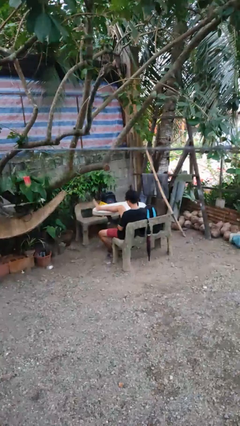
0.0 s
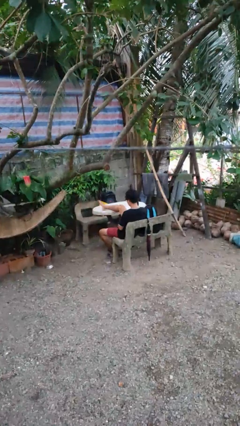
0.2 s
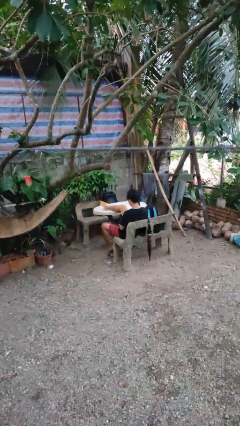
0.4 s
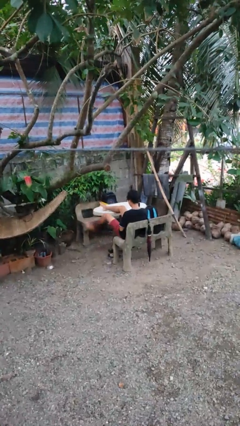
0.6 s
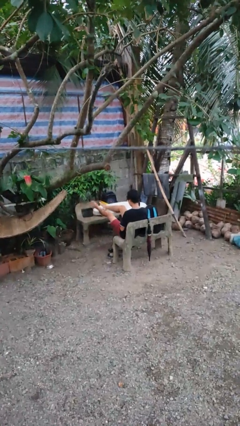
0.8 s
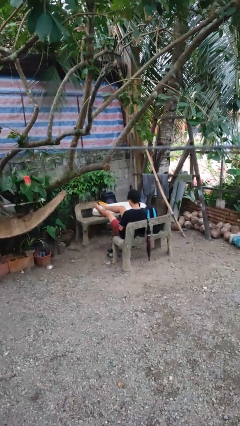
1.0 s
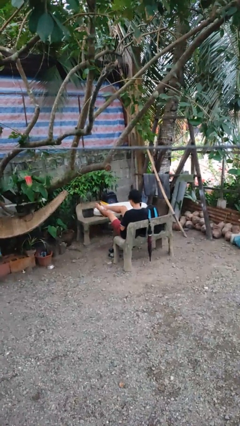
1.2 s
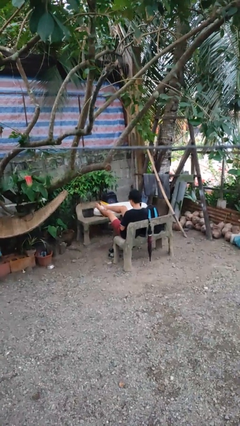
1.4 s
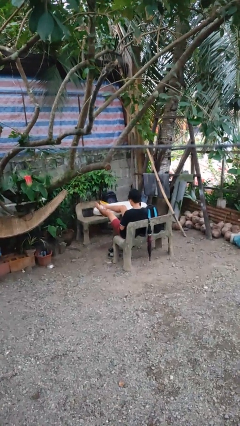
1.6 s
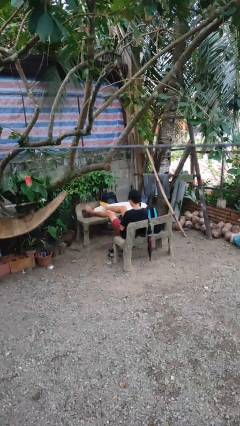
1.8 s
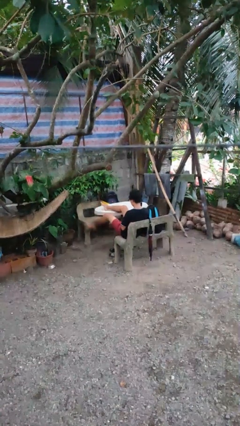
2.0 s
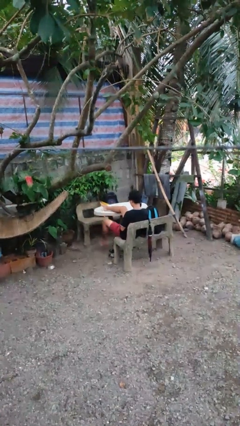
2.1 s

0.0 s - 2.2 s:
person puts feet up

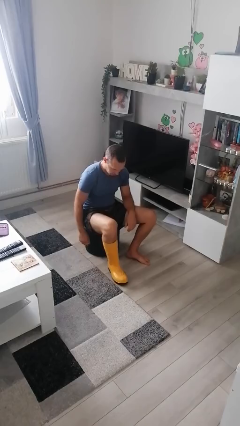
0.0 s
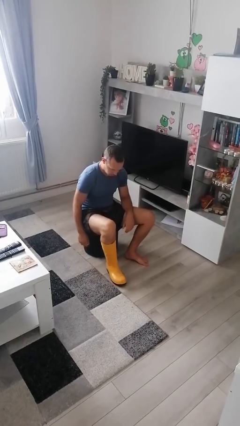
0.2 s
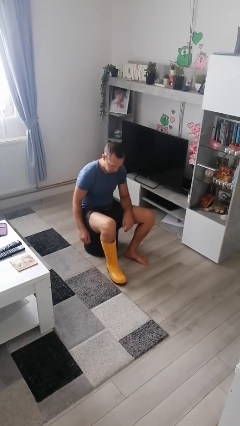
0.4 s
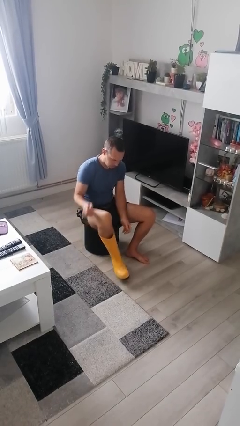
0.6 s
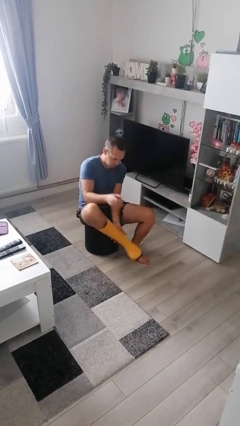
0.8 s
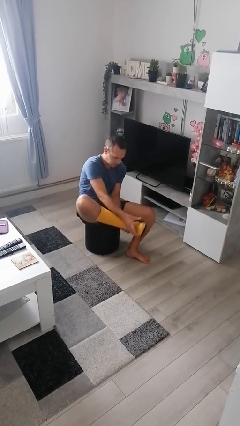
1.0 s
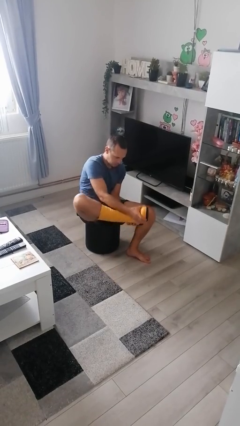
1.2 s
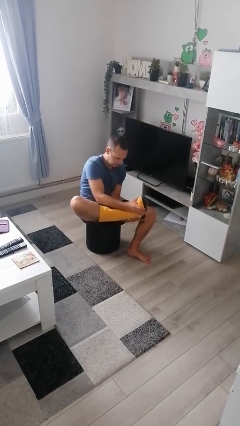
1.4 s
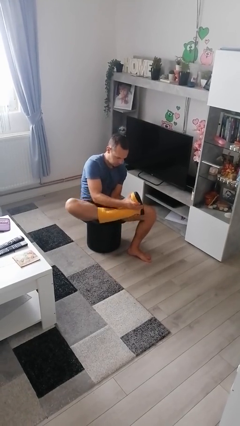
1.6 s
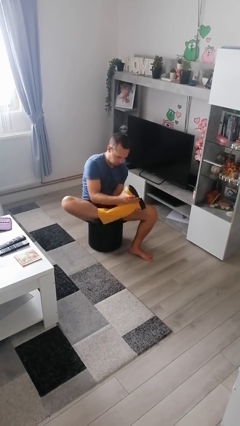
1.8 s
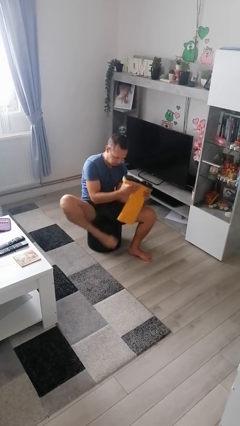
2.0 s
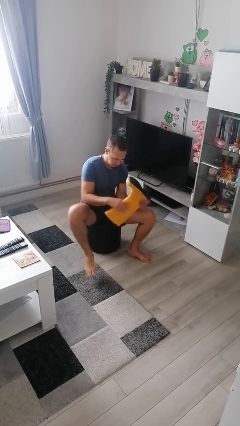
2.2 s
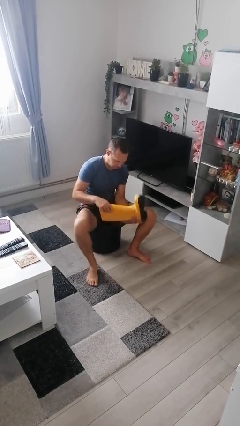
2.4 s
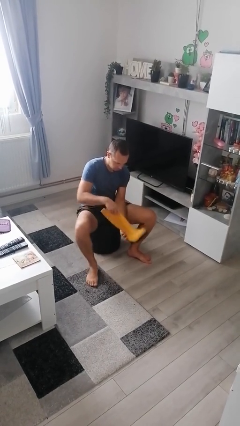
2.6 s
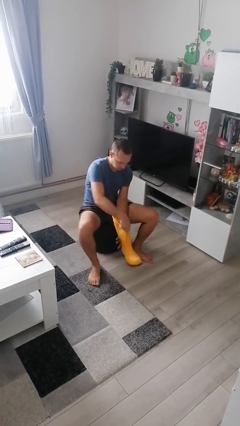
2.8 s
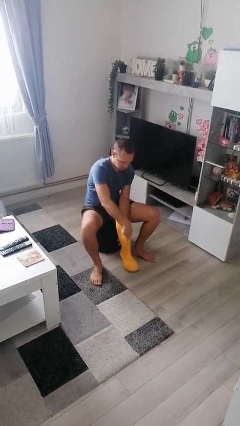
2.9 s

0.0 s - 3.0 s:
person takes off boots

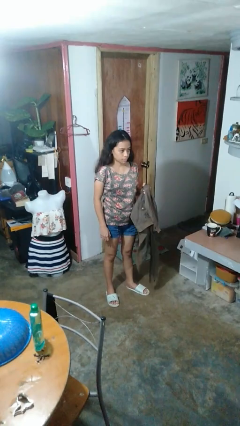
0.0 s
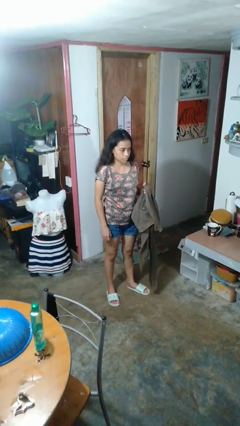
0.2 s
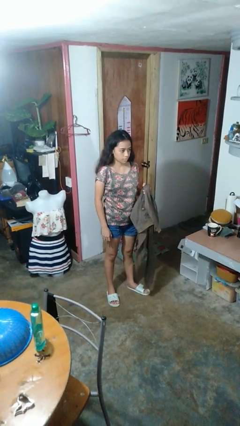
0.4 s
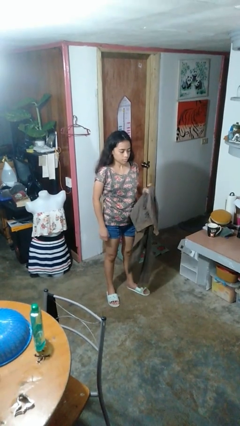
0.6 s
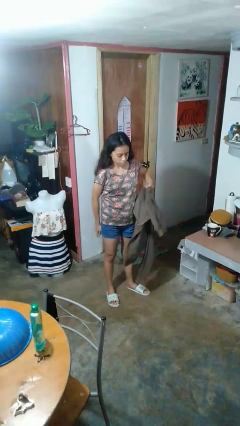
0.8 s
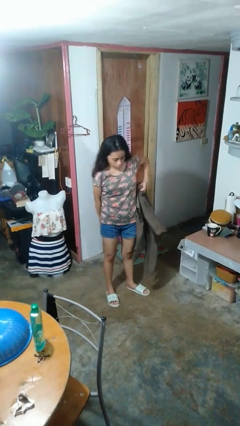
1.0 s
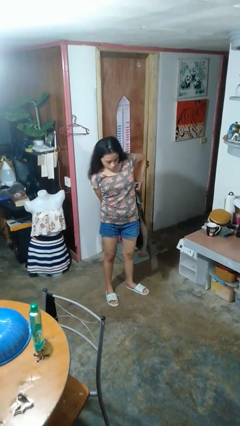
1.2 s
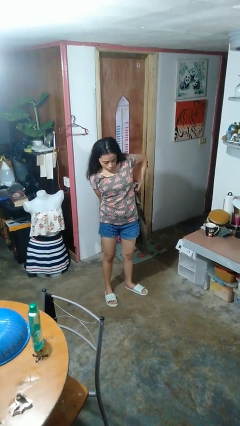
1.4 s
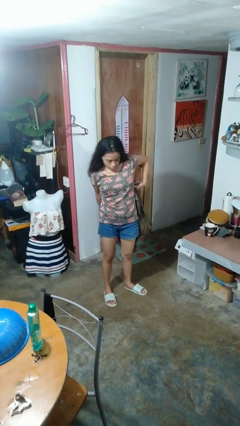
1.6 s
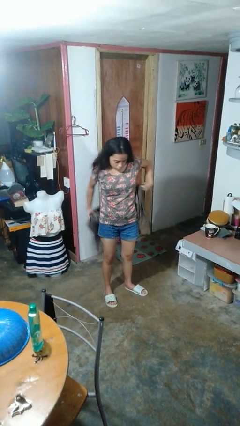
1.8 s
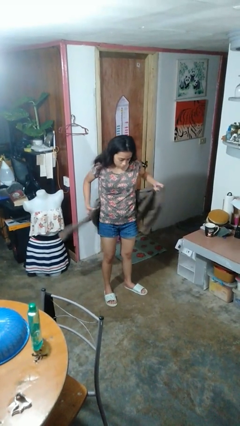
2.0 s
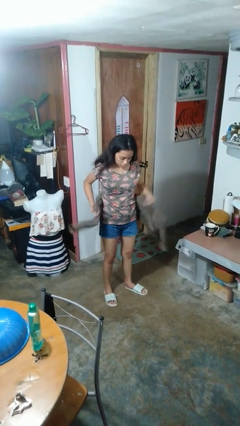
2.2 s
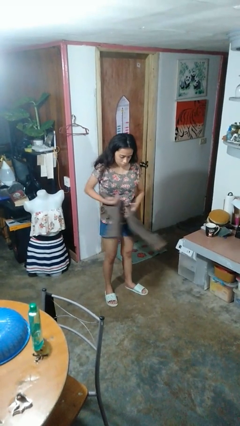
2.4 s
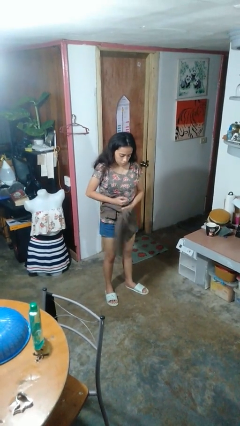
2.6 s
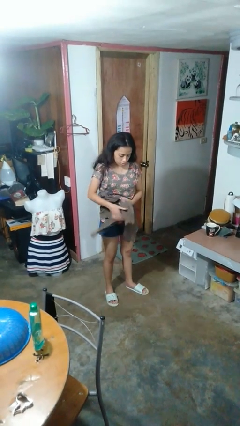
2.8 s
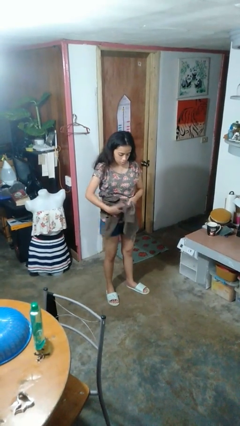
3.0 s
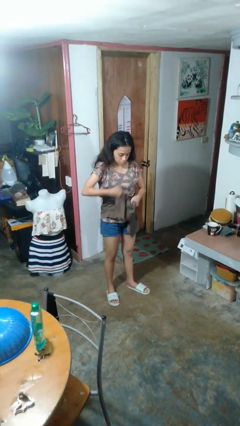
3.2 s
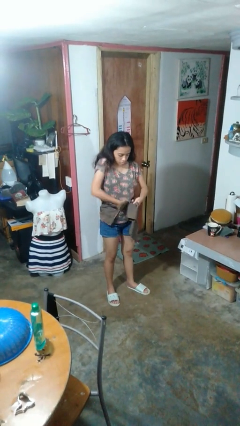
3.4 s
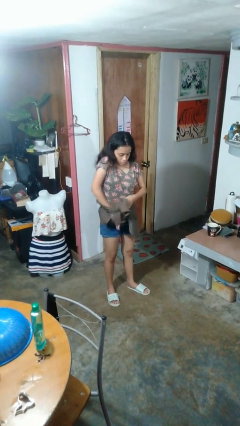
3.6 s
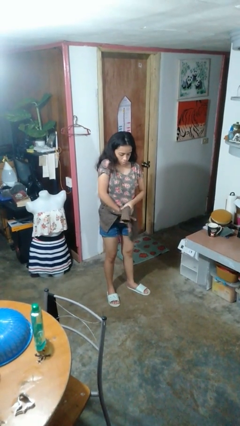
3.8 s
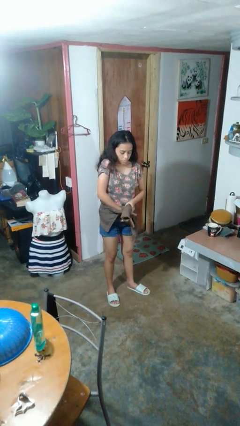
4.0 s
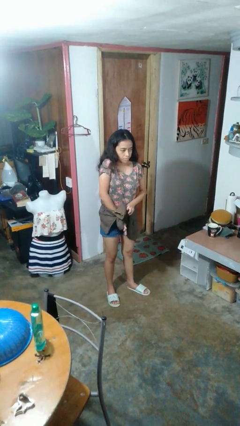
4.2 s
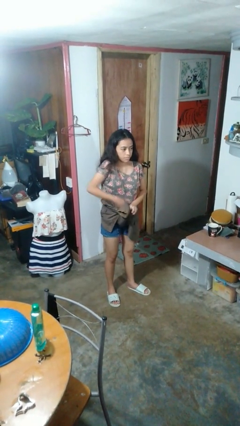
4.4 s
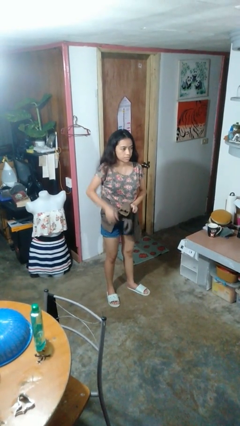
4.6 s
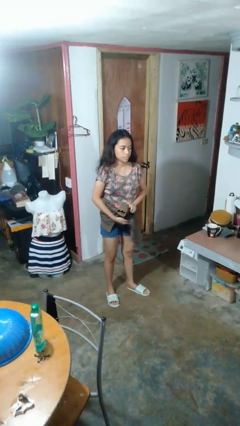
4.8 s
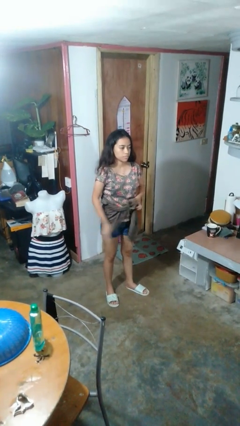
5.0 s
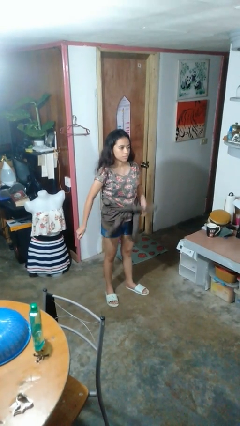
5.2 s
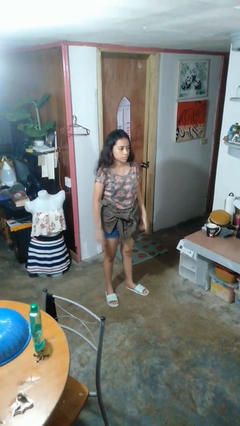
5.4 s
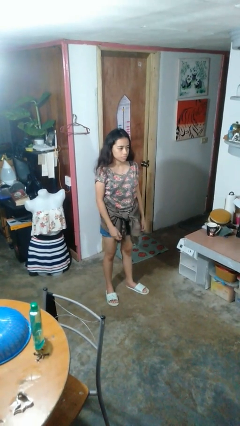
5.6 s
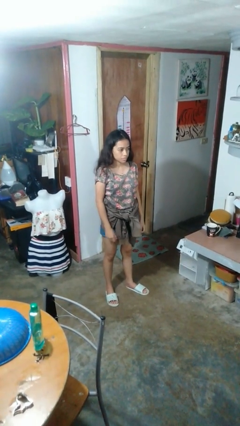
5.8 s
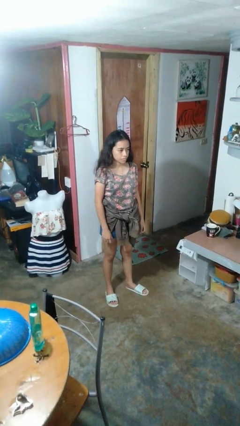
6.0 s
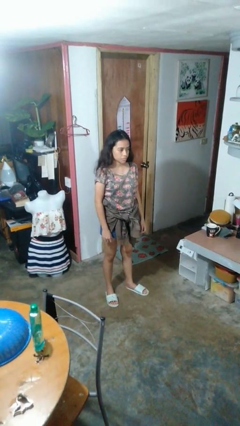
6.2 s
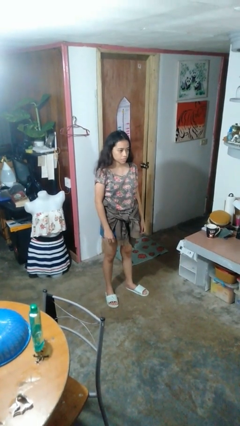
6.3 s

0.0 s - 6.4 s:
person ties jacket around waist

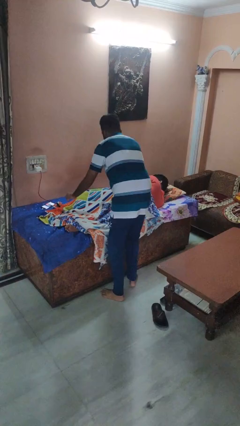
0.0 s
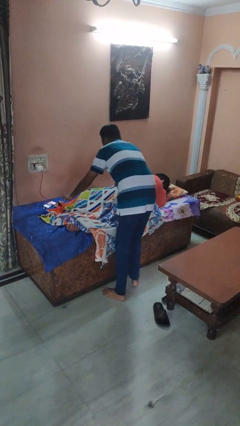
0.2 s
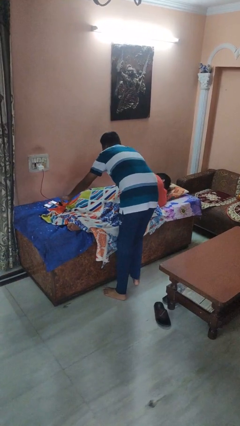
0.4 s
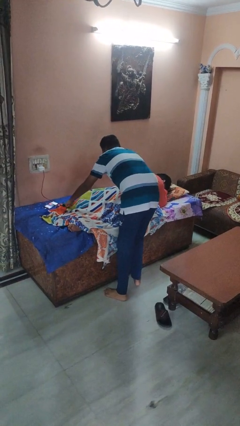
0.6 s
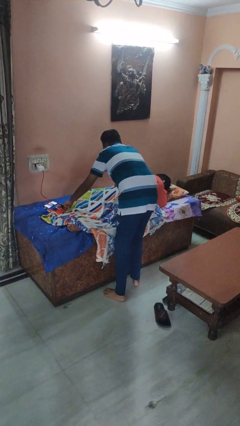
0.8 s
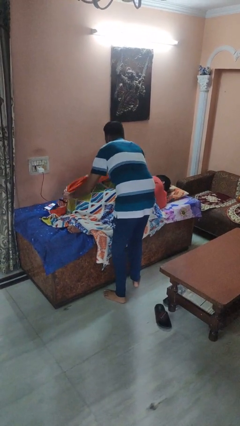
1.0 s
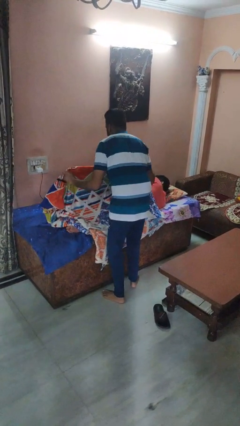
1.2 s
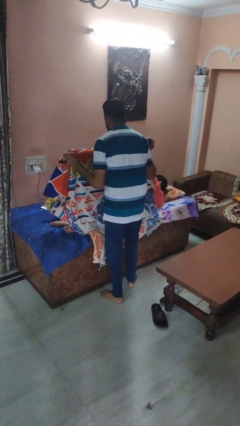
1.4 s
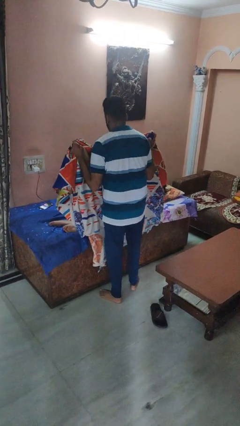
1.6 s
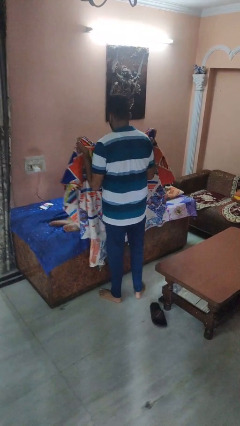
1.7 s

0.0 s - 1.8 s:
person uncovers friend with blanket

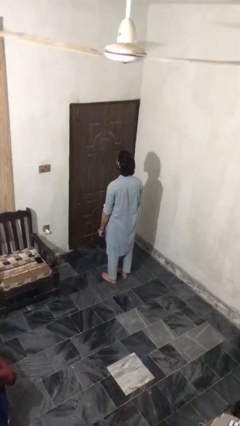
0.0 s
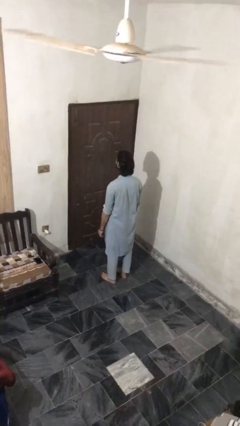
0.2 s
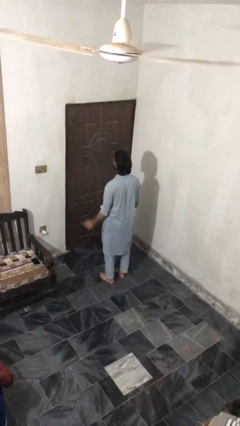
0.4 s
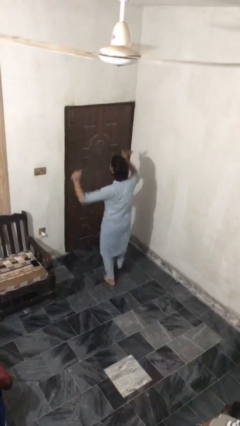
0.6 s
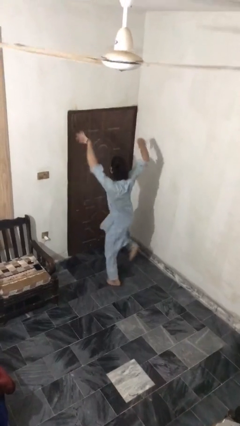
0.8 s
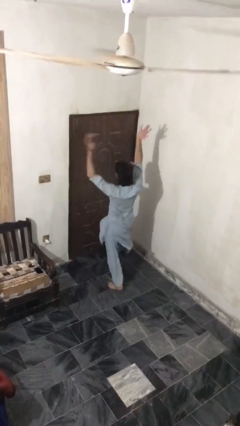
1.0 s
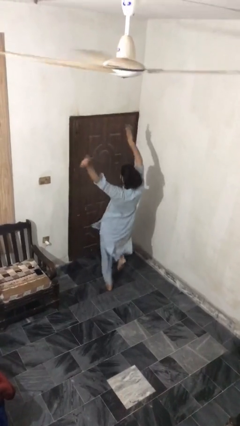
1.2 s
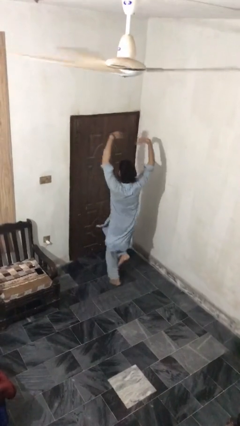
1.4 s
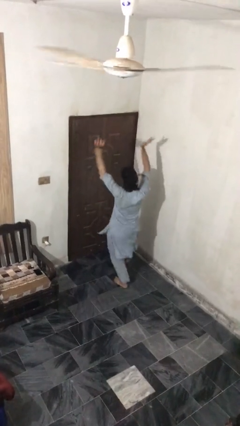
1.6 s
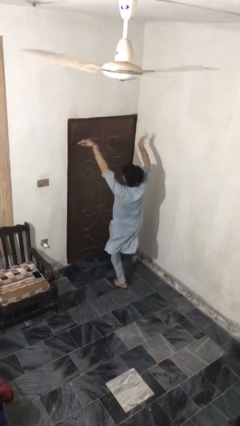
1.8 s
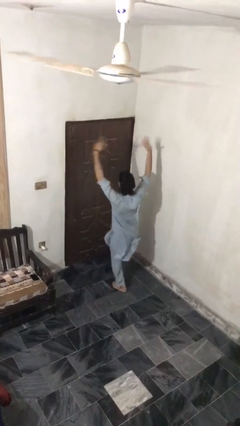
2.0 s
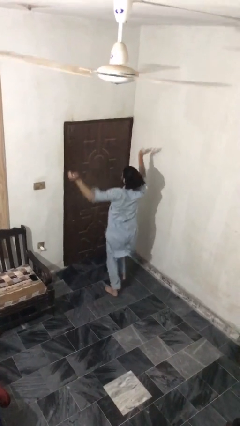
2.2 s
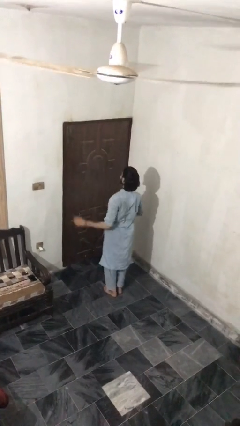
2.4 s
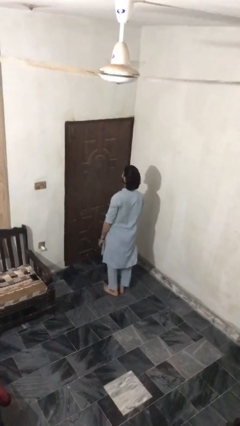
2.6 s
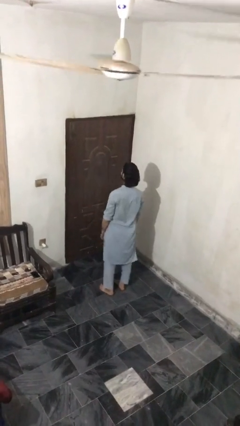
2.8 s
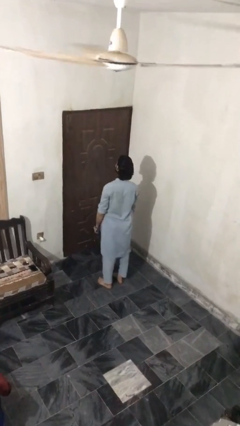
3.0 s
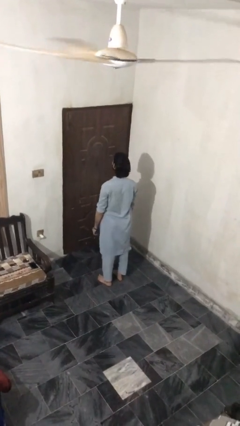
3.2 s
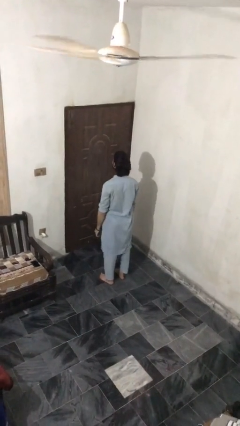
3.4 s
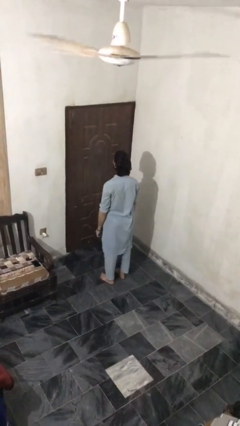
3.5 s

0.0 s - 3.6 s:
person dances in place

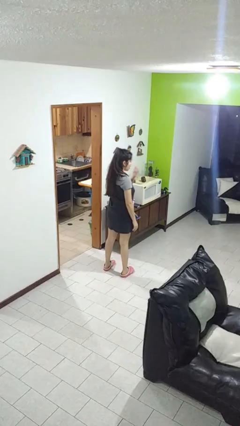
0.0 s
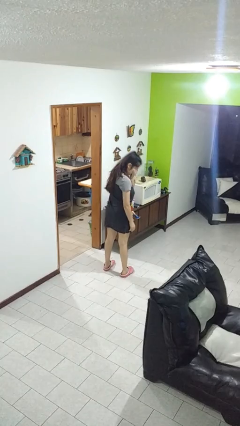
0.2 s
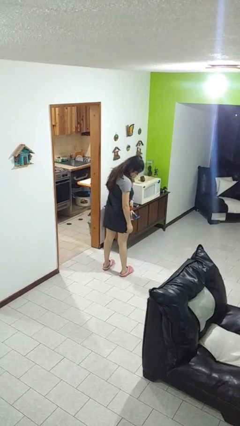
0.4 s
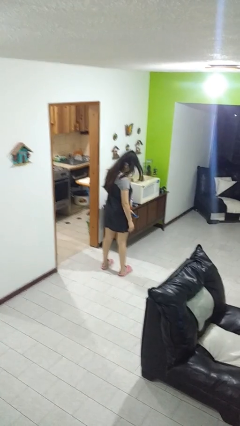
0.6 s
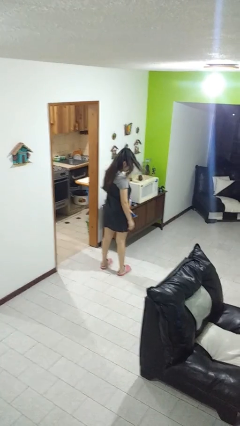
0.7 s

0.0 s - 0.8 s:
person sneezes into hand
